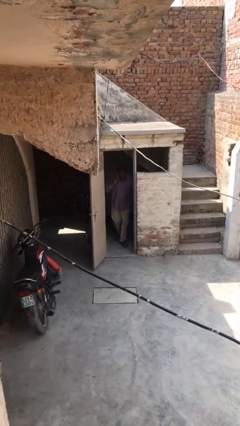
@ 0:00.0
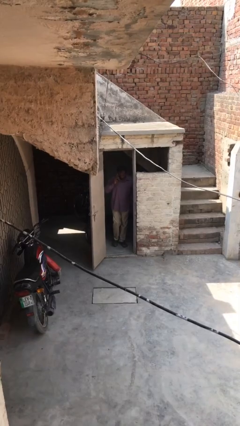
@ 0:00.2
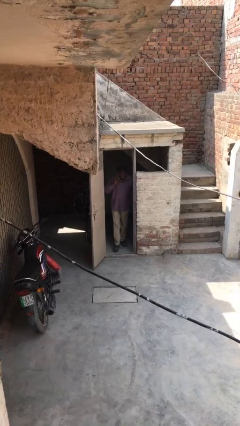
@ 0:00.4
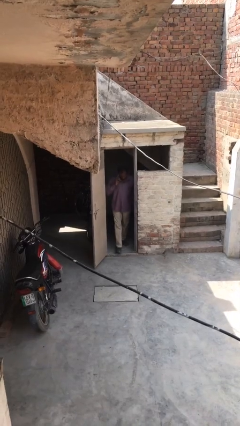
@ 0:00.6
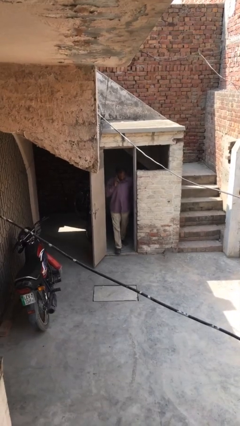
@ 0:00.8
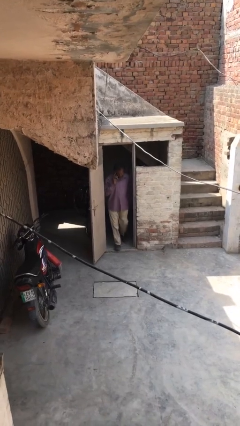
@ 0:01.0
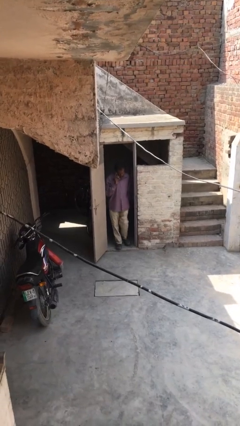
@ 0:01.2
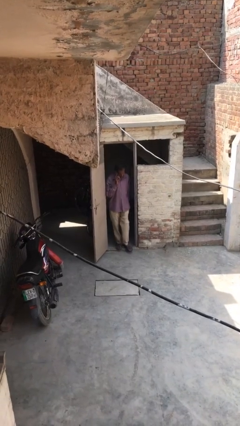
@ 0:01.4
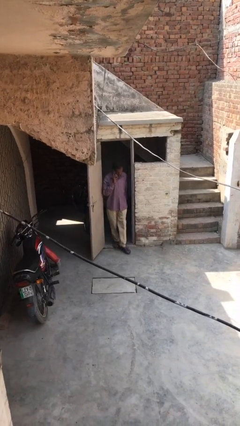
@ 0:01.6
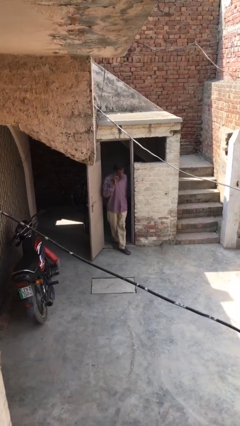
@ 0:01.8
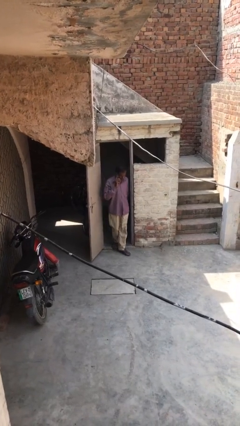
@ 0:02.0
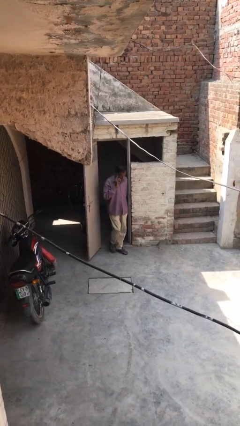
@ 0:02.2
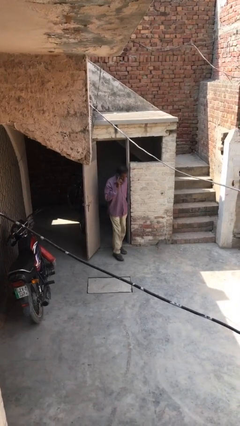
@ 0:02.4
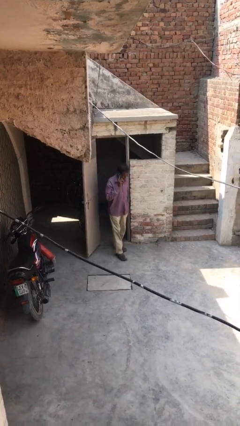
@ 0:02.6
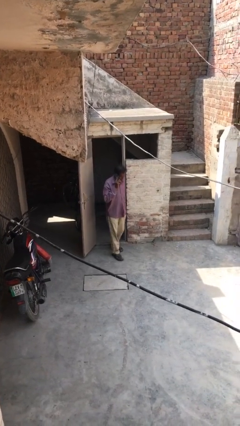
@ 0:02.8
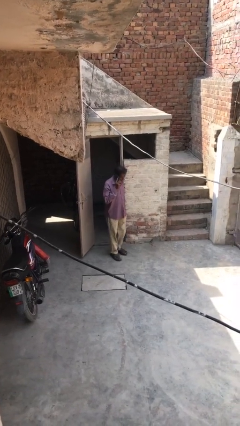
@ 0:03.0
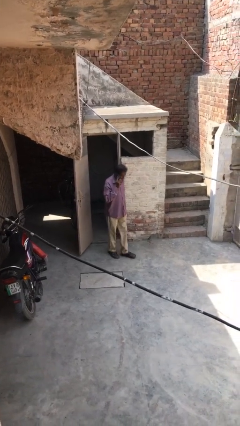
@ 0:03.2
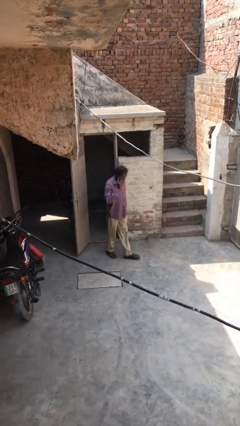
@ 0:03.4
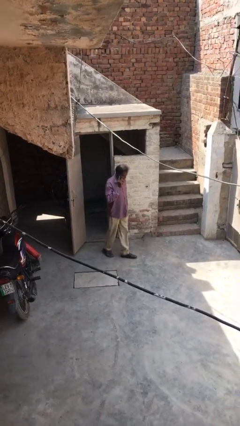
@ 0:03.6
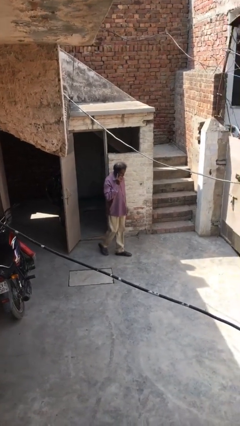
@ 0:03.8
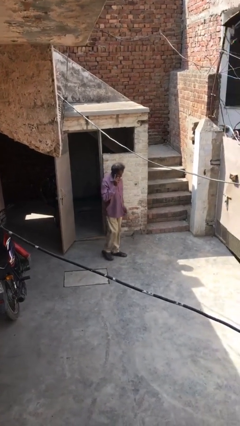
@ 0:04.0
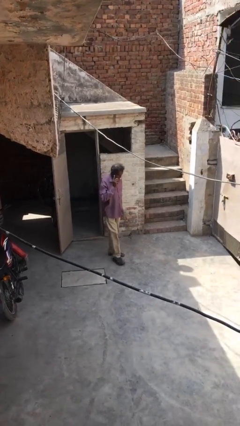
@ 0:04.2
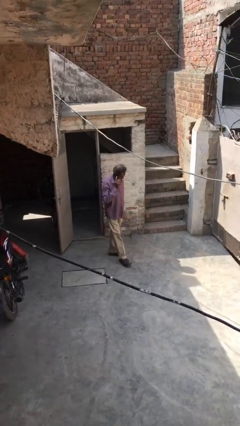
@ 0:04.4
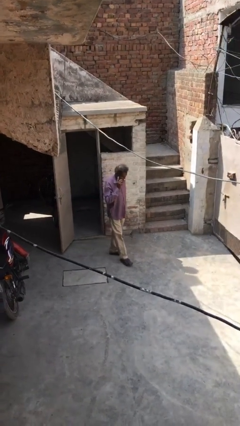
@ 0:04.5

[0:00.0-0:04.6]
person enters scene through structure

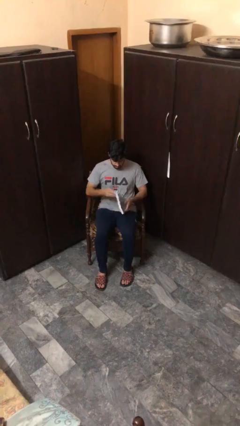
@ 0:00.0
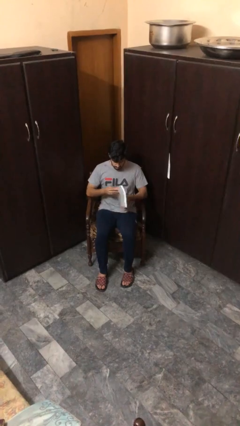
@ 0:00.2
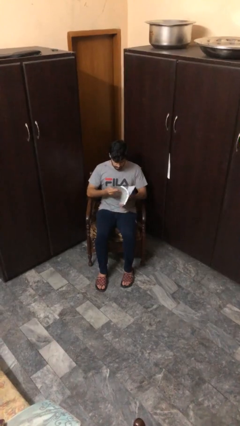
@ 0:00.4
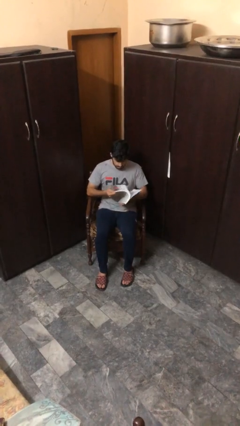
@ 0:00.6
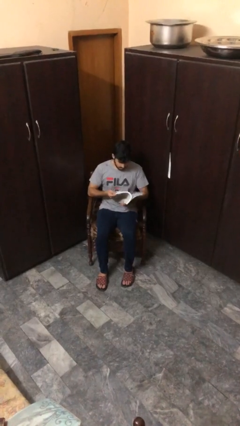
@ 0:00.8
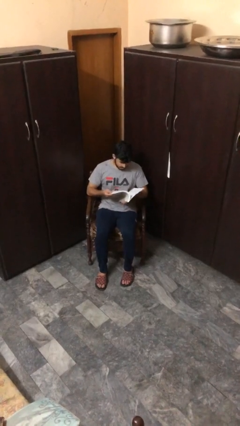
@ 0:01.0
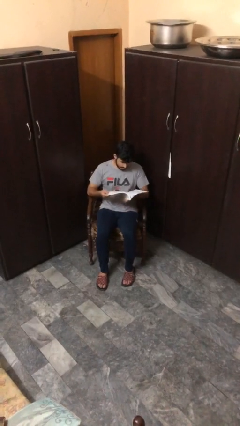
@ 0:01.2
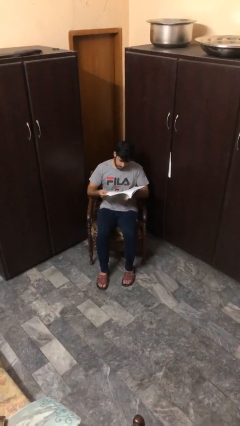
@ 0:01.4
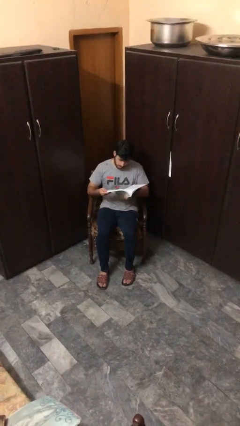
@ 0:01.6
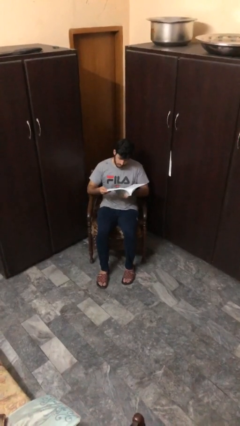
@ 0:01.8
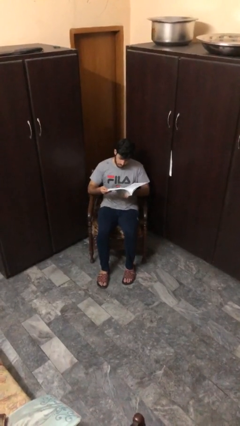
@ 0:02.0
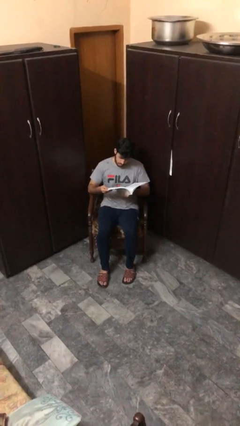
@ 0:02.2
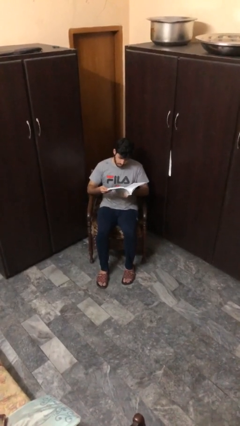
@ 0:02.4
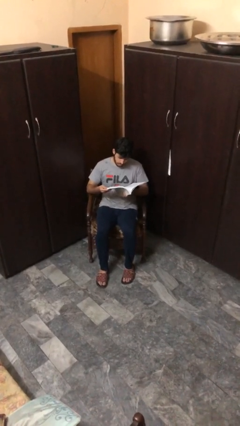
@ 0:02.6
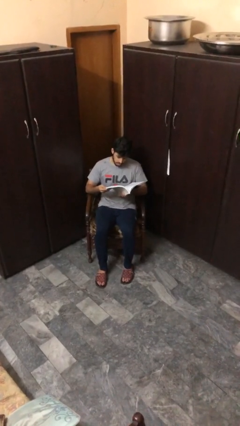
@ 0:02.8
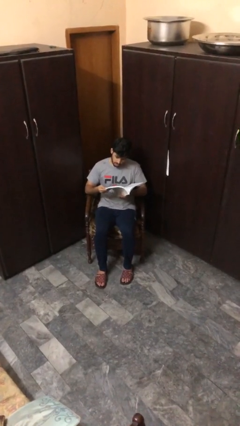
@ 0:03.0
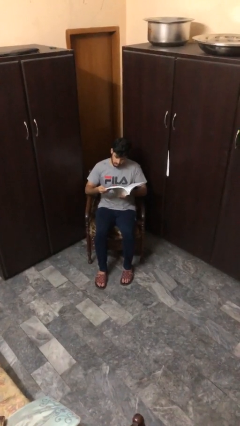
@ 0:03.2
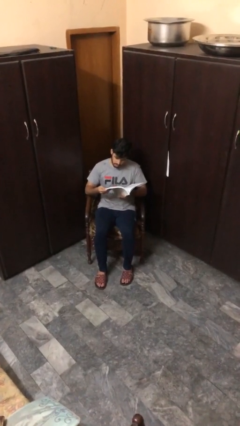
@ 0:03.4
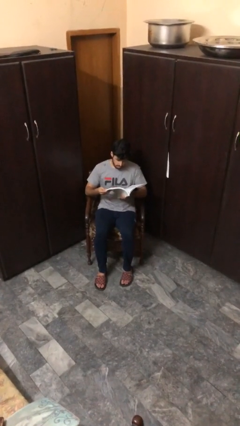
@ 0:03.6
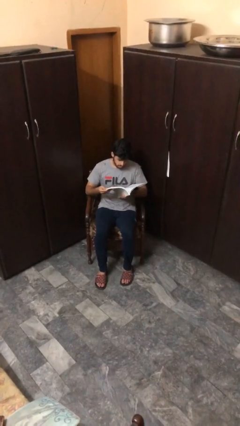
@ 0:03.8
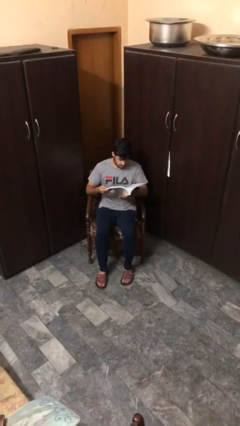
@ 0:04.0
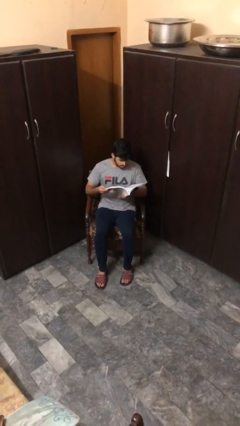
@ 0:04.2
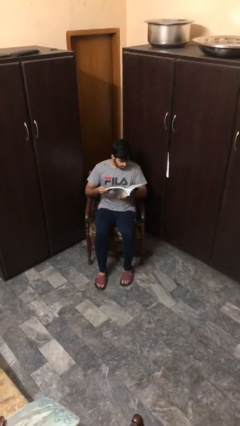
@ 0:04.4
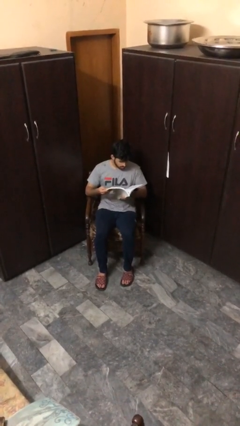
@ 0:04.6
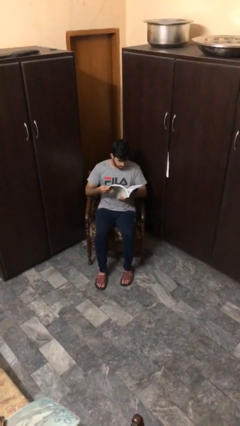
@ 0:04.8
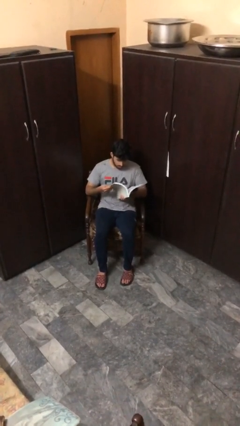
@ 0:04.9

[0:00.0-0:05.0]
person reads book

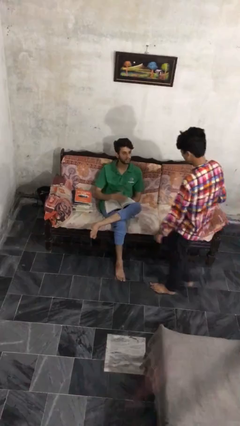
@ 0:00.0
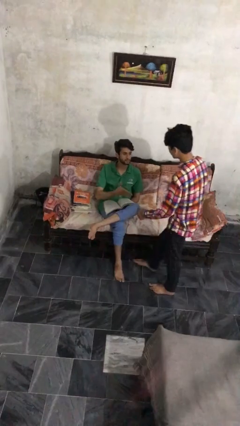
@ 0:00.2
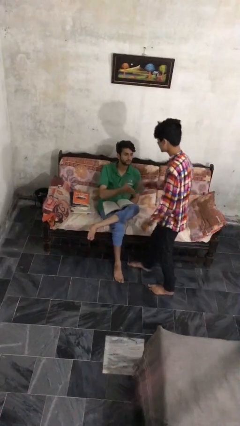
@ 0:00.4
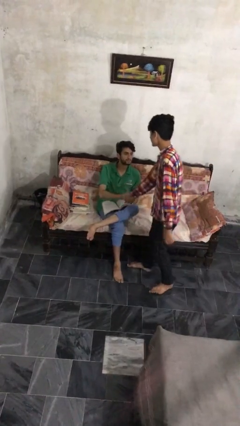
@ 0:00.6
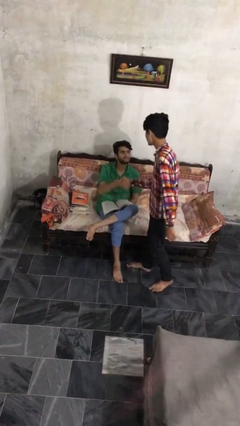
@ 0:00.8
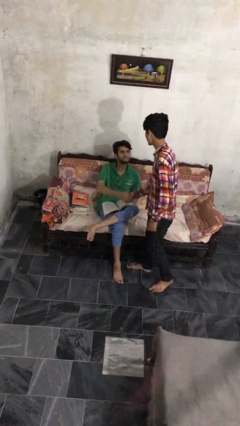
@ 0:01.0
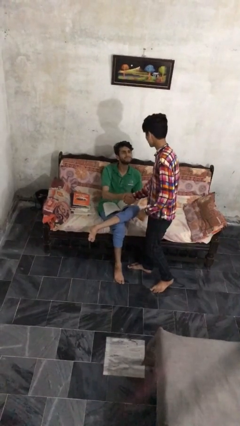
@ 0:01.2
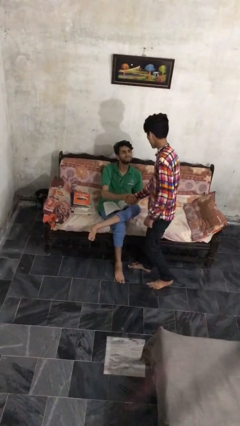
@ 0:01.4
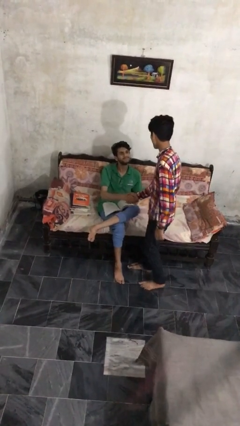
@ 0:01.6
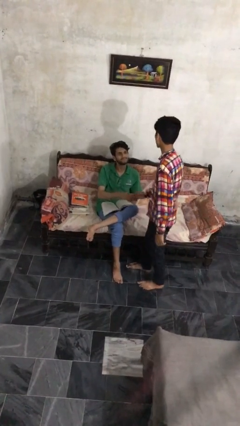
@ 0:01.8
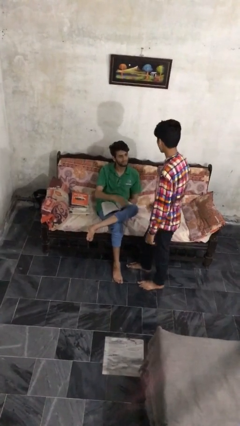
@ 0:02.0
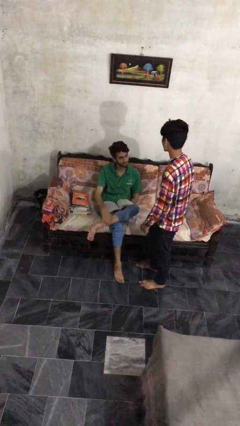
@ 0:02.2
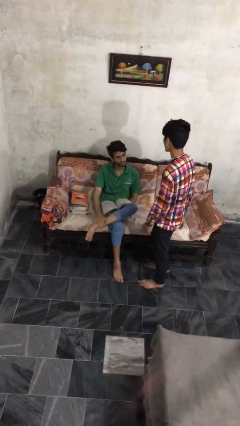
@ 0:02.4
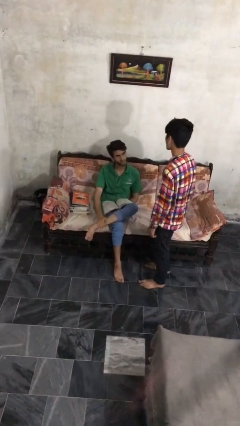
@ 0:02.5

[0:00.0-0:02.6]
person shakes hand

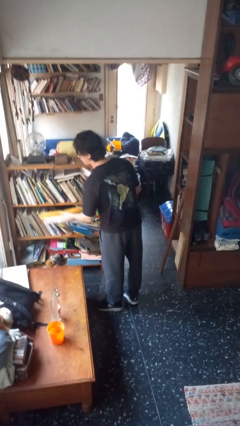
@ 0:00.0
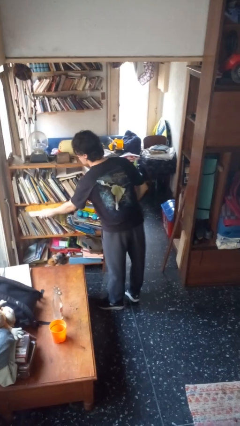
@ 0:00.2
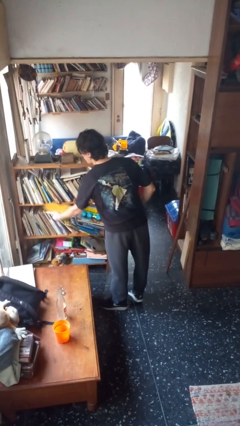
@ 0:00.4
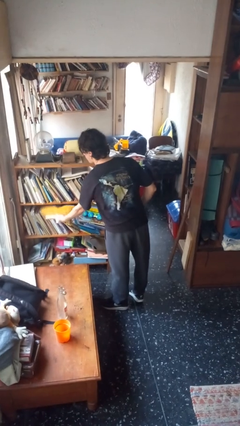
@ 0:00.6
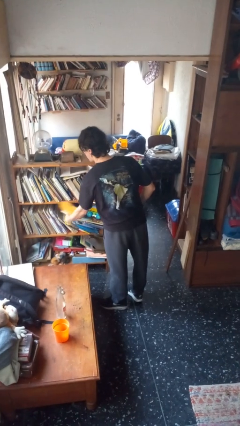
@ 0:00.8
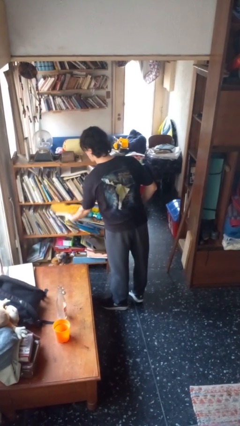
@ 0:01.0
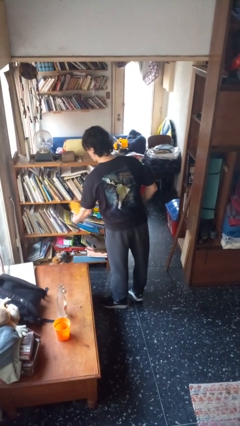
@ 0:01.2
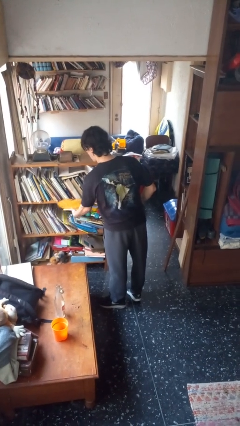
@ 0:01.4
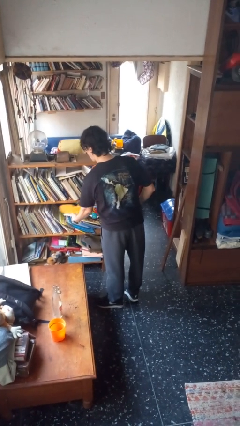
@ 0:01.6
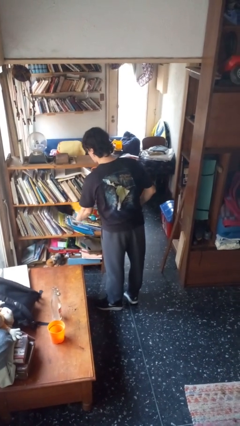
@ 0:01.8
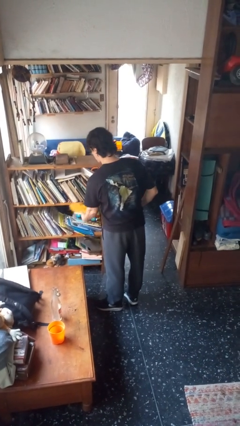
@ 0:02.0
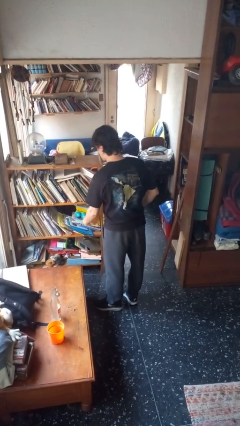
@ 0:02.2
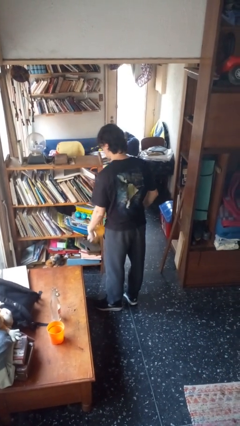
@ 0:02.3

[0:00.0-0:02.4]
person dusts furniture

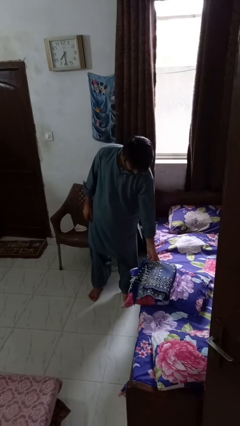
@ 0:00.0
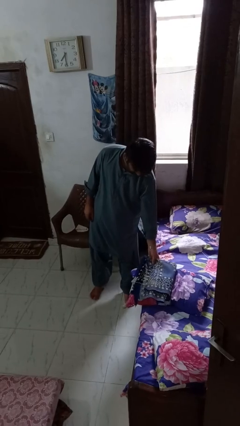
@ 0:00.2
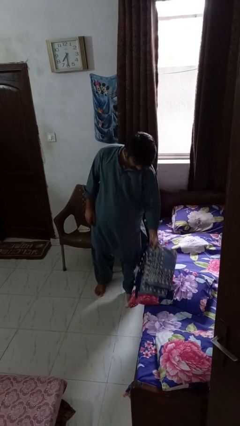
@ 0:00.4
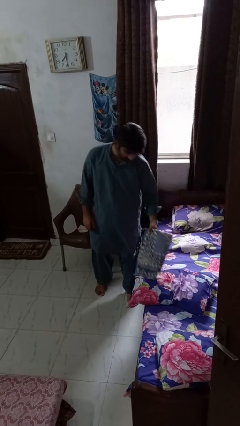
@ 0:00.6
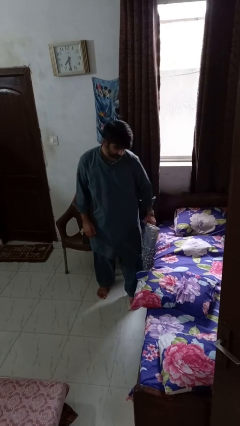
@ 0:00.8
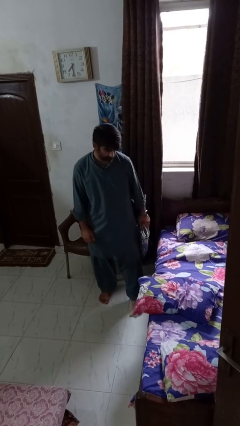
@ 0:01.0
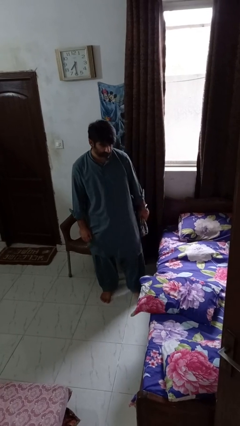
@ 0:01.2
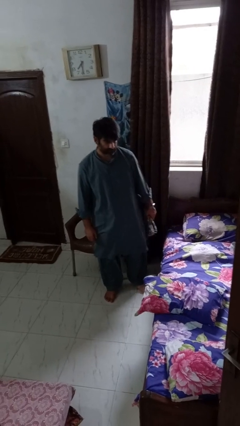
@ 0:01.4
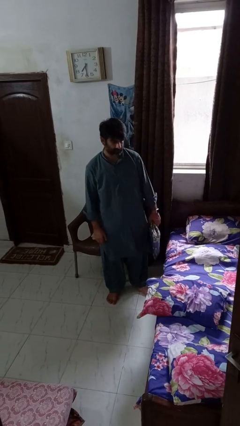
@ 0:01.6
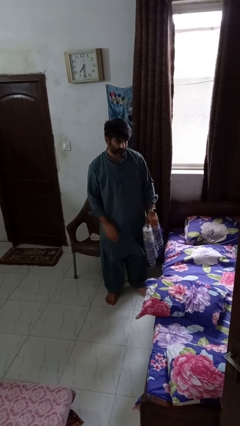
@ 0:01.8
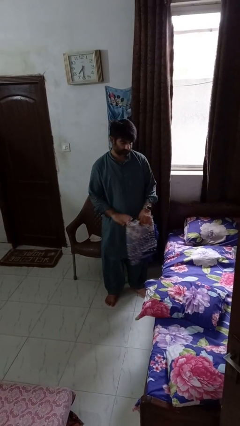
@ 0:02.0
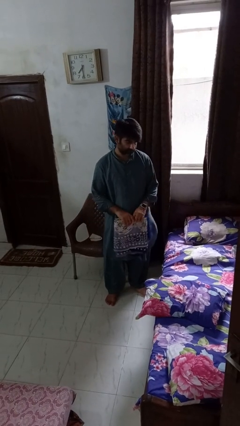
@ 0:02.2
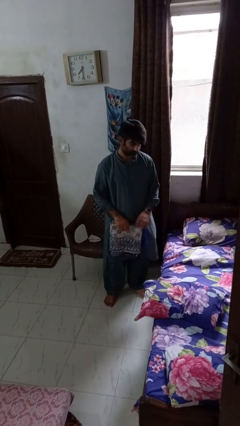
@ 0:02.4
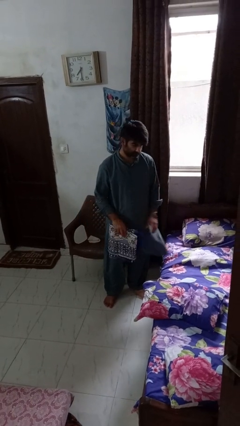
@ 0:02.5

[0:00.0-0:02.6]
person picks up object from bed

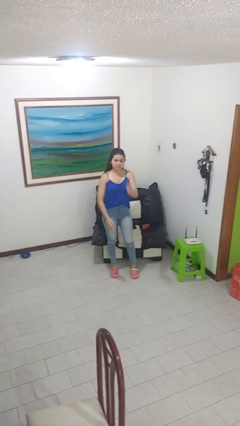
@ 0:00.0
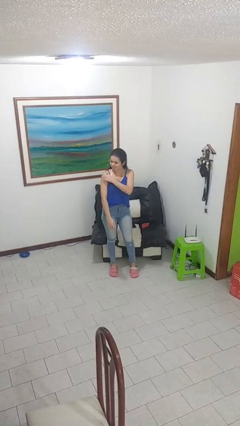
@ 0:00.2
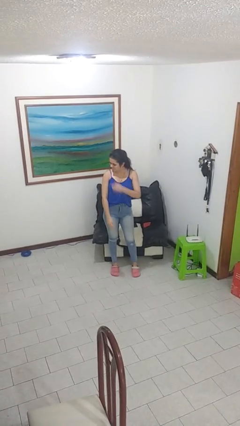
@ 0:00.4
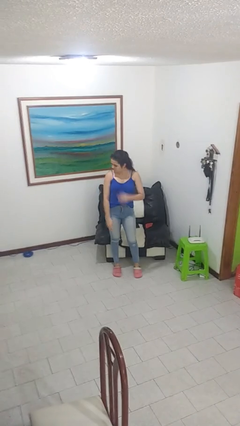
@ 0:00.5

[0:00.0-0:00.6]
person swats bug
